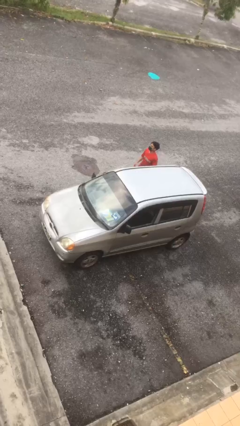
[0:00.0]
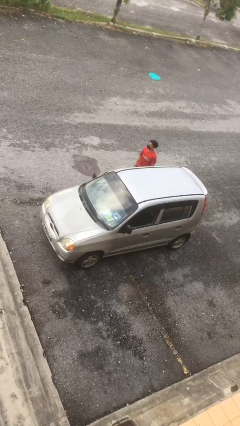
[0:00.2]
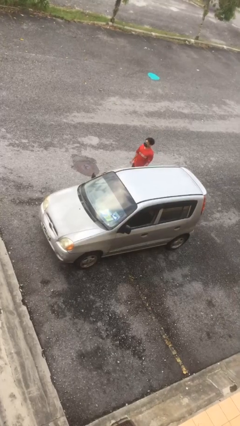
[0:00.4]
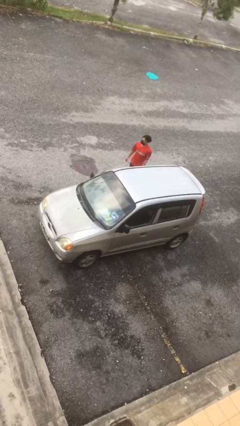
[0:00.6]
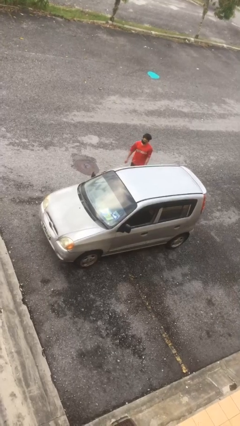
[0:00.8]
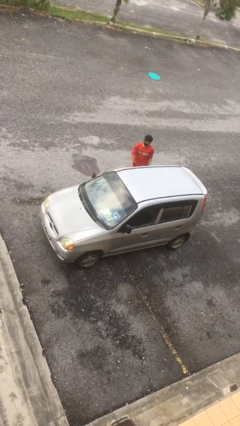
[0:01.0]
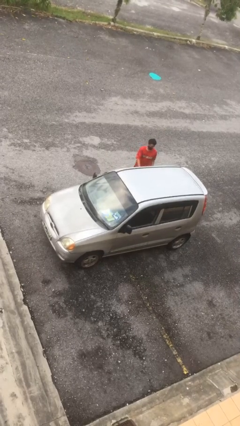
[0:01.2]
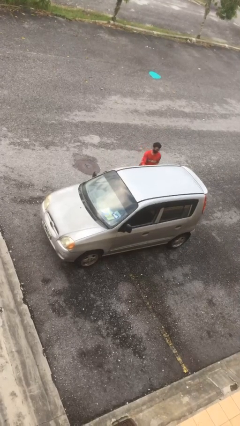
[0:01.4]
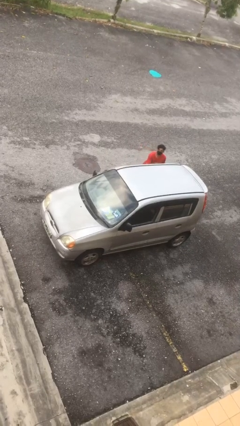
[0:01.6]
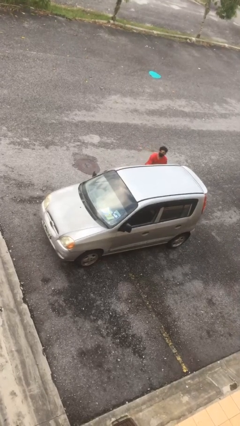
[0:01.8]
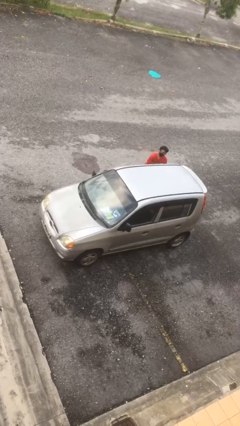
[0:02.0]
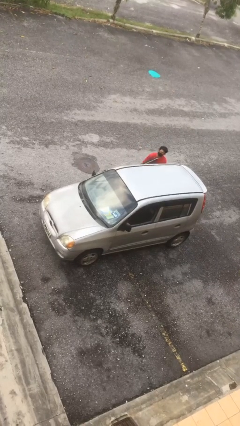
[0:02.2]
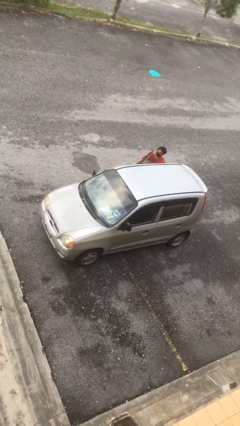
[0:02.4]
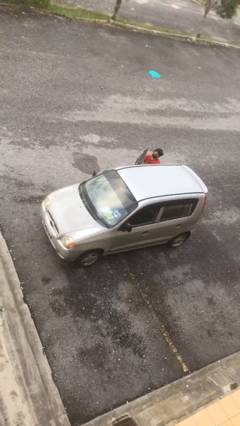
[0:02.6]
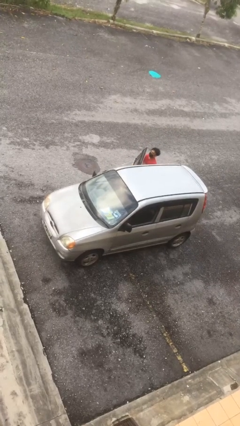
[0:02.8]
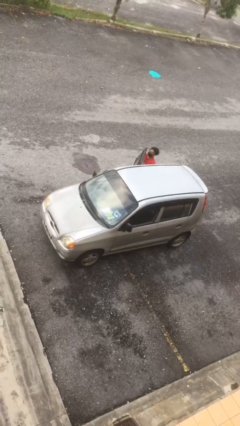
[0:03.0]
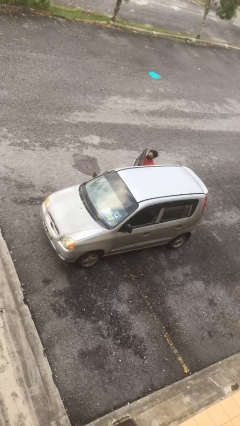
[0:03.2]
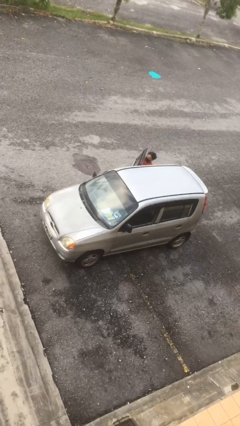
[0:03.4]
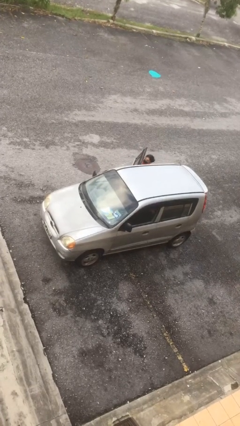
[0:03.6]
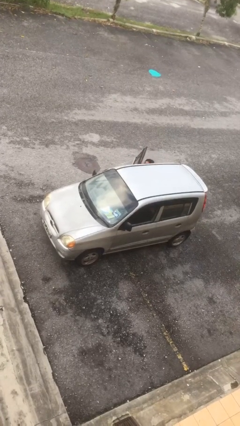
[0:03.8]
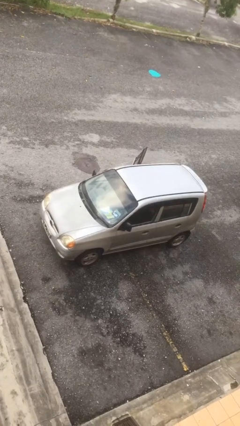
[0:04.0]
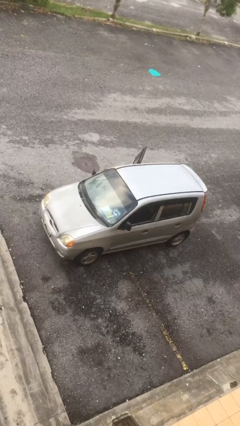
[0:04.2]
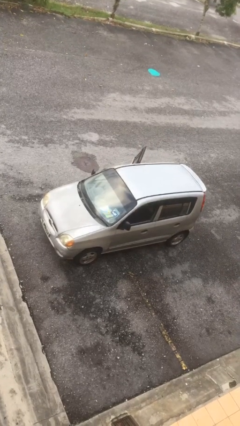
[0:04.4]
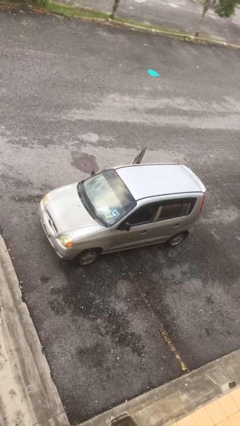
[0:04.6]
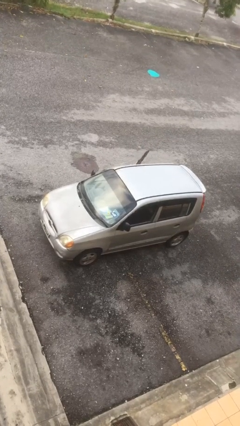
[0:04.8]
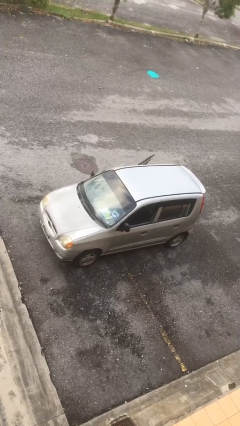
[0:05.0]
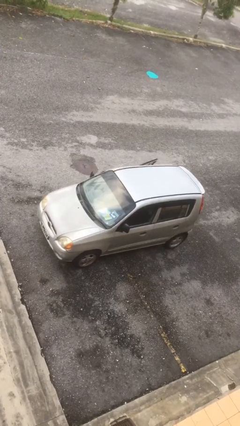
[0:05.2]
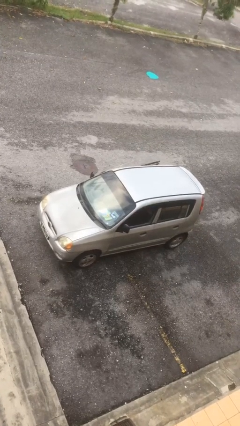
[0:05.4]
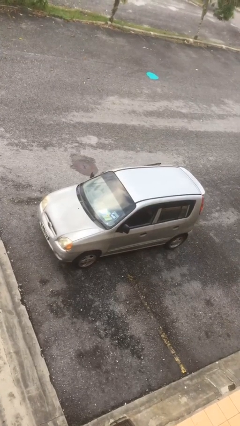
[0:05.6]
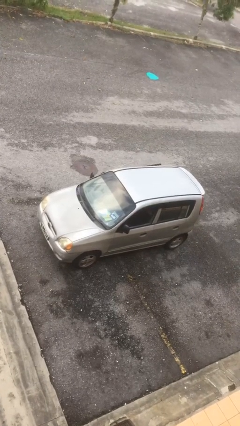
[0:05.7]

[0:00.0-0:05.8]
car picks up person

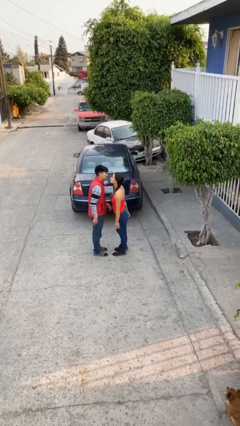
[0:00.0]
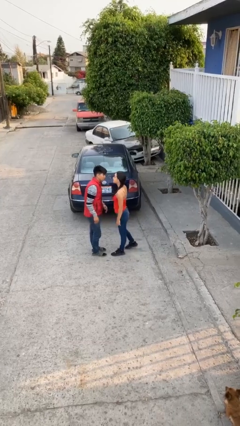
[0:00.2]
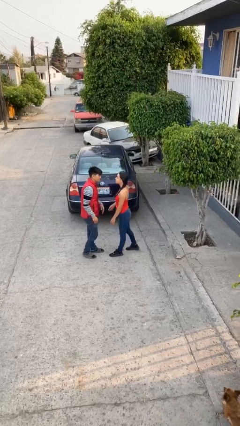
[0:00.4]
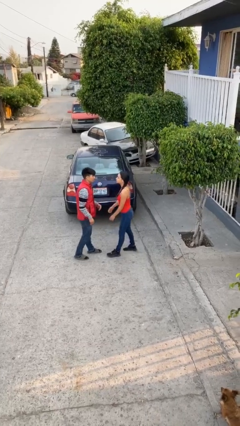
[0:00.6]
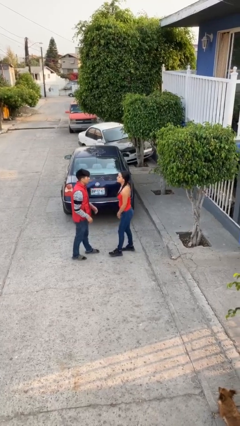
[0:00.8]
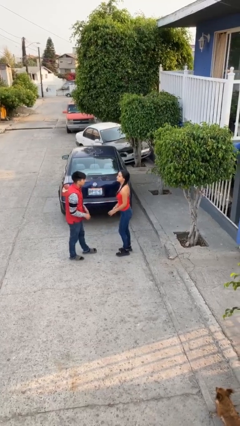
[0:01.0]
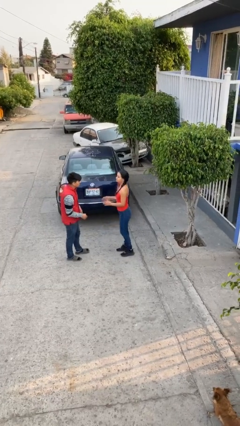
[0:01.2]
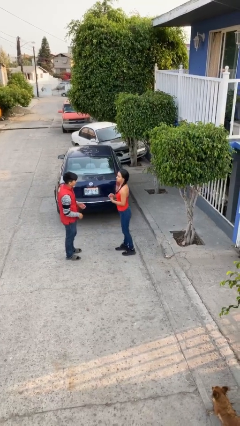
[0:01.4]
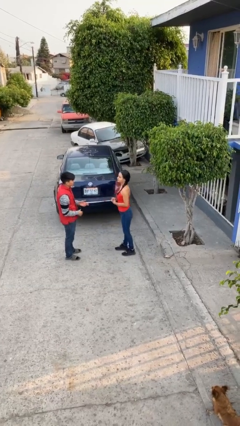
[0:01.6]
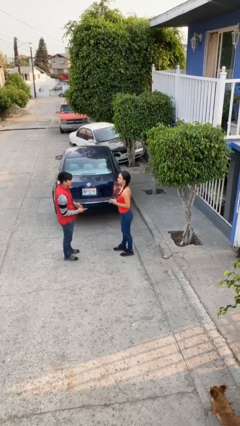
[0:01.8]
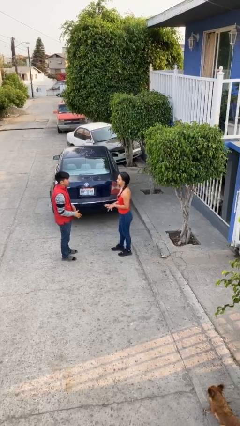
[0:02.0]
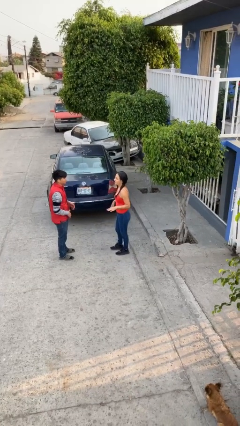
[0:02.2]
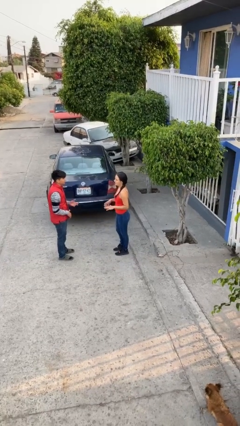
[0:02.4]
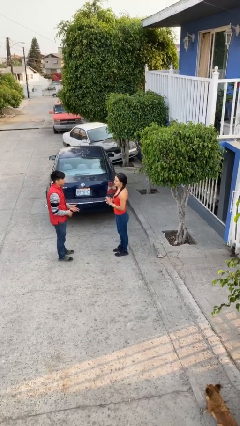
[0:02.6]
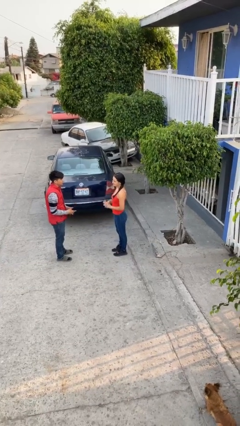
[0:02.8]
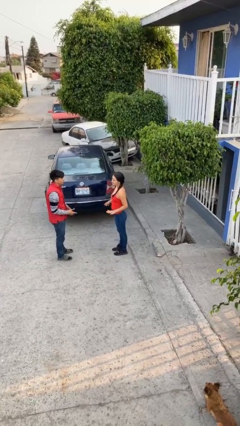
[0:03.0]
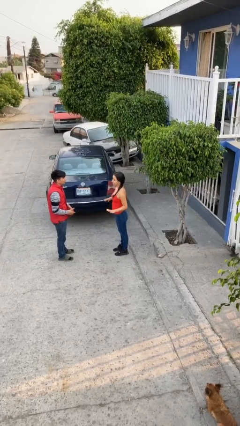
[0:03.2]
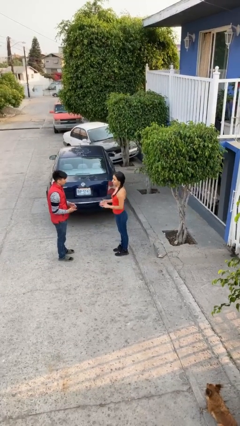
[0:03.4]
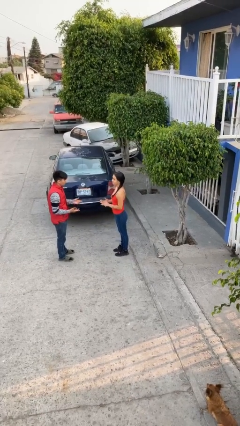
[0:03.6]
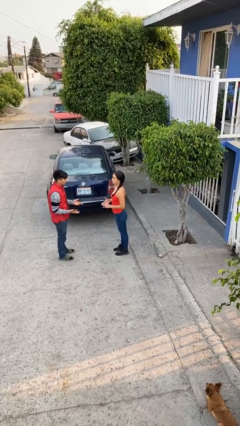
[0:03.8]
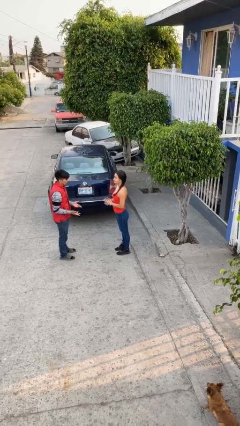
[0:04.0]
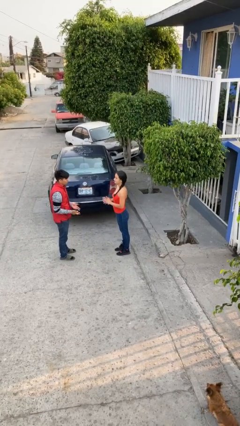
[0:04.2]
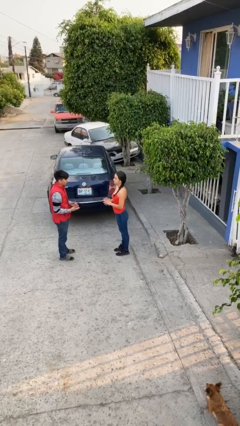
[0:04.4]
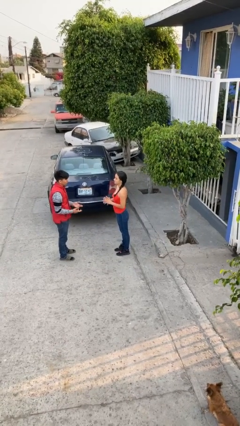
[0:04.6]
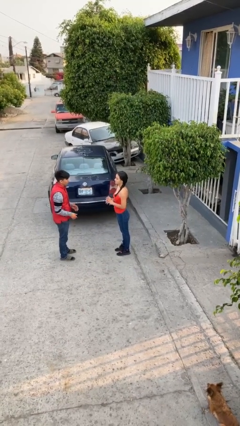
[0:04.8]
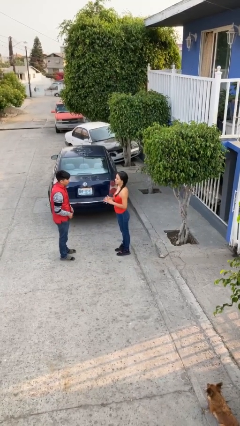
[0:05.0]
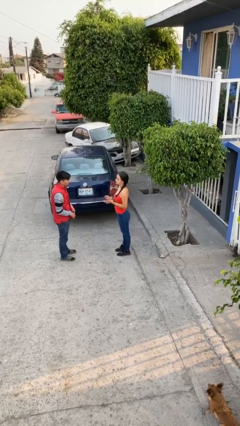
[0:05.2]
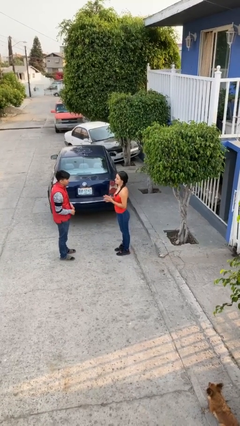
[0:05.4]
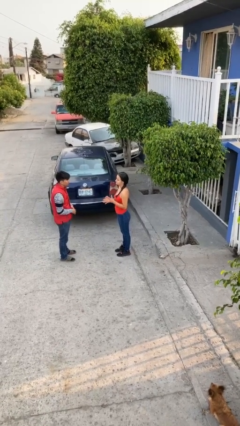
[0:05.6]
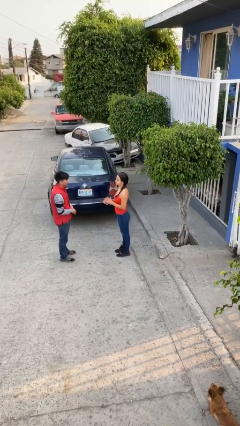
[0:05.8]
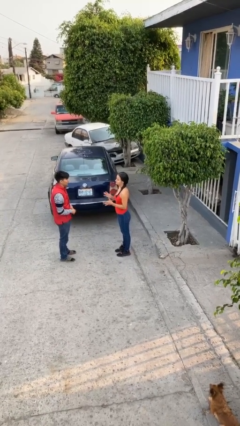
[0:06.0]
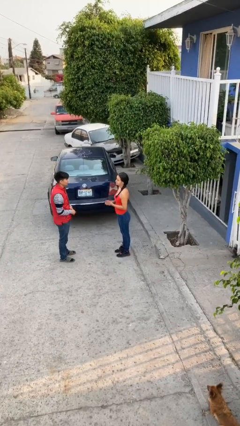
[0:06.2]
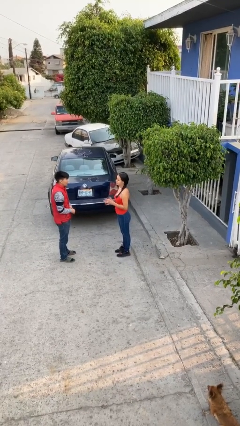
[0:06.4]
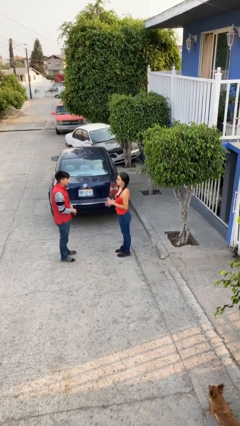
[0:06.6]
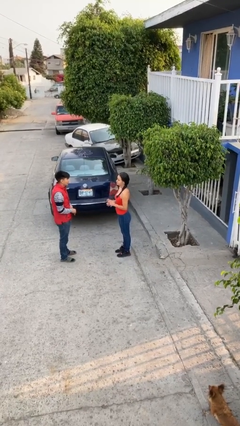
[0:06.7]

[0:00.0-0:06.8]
person talks to person

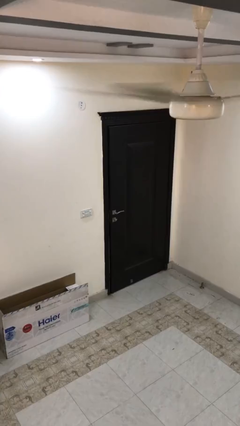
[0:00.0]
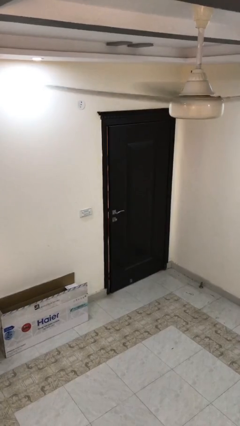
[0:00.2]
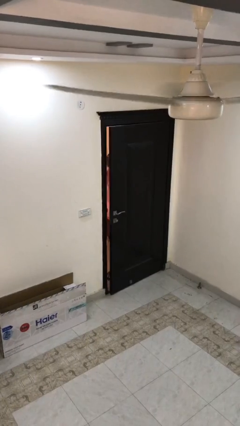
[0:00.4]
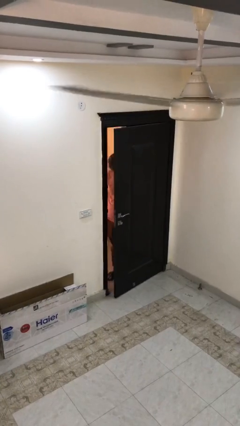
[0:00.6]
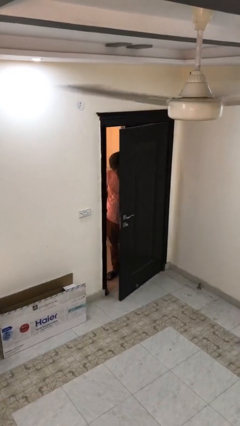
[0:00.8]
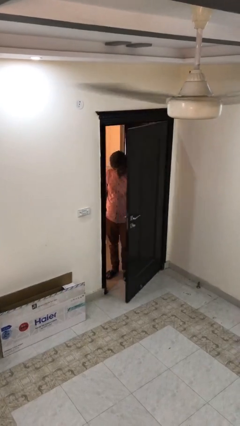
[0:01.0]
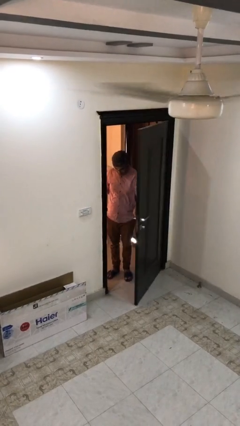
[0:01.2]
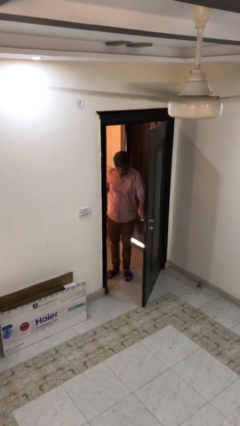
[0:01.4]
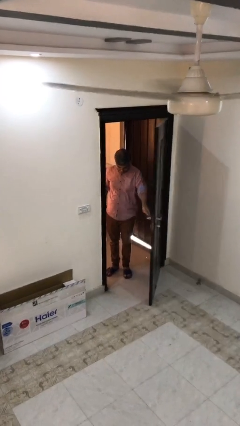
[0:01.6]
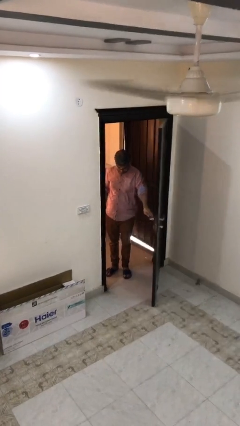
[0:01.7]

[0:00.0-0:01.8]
person opens facility door

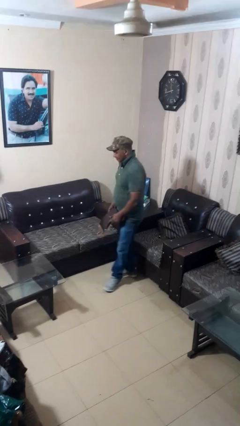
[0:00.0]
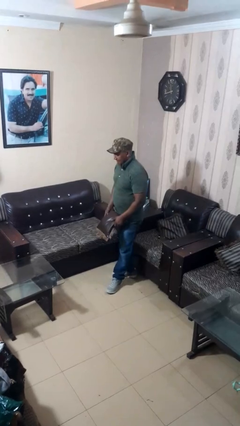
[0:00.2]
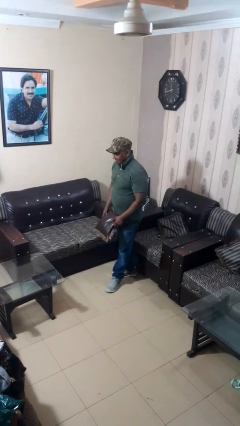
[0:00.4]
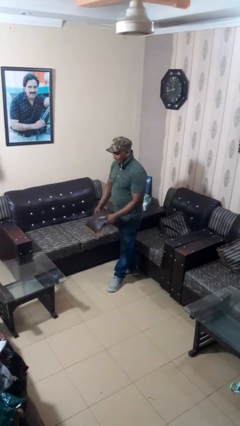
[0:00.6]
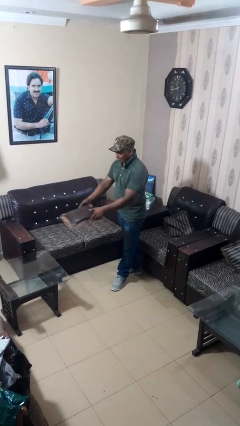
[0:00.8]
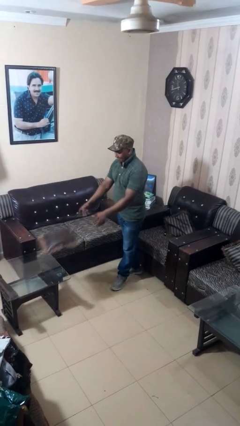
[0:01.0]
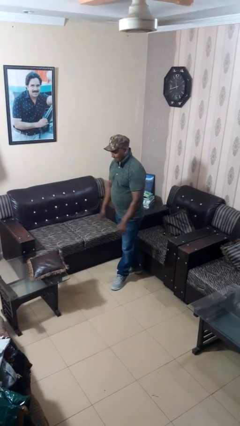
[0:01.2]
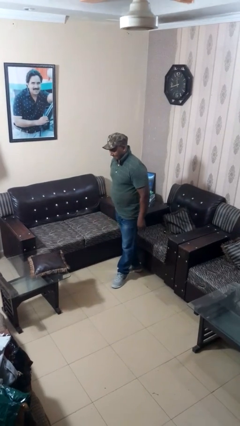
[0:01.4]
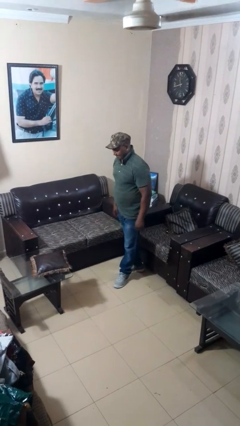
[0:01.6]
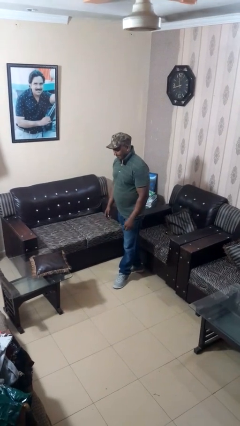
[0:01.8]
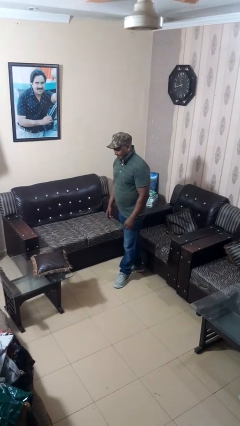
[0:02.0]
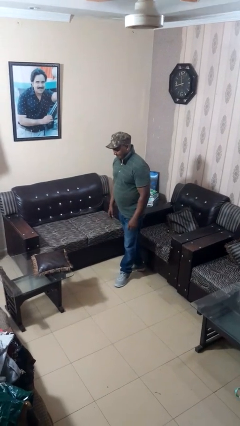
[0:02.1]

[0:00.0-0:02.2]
person throws object on table

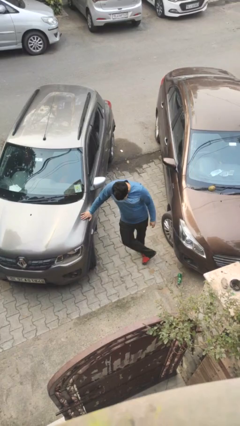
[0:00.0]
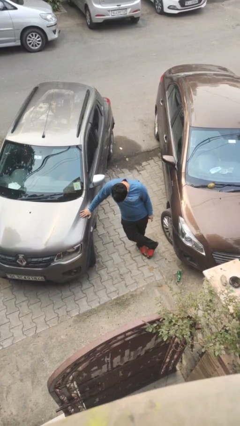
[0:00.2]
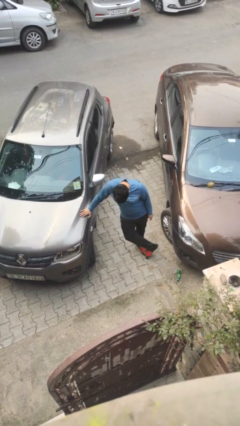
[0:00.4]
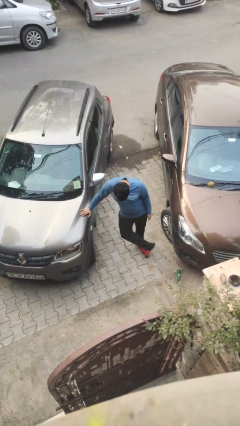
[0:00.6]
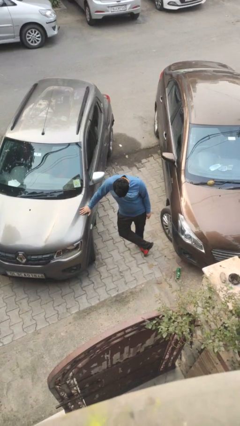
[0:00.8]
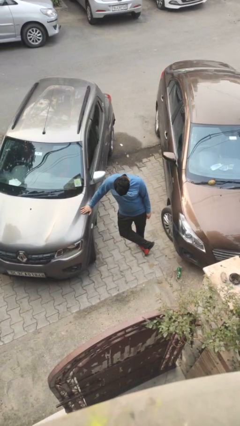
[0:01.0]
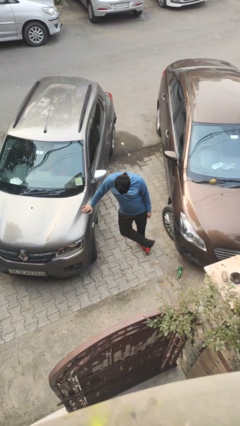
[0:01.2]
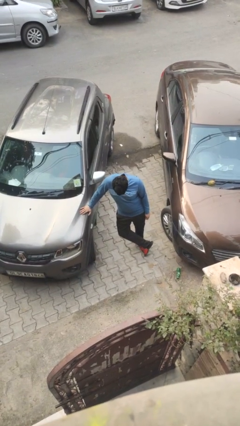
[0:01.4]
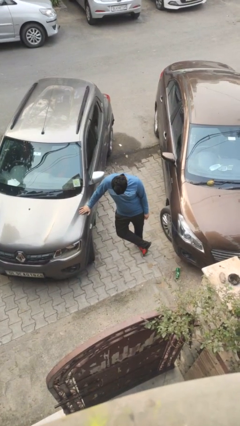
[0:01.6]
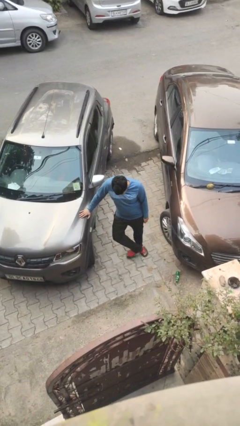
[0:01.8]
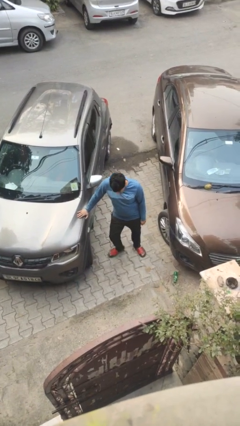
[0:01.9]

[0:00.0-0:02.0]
person leans against car
